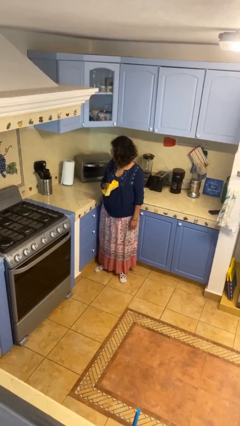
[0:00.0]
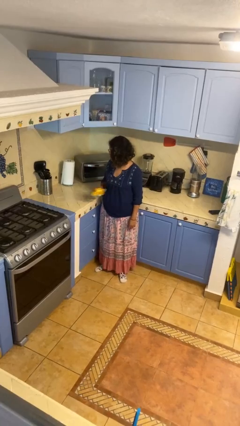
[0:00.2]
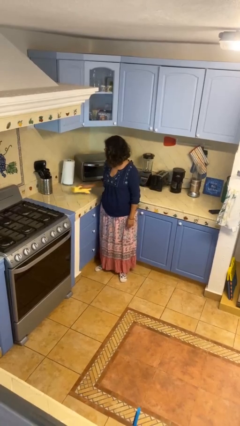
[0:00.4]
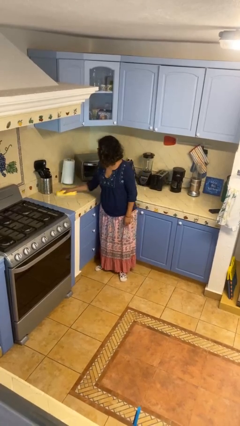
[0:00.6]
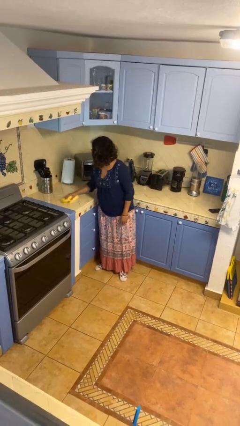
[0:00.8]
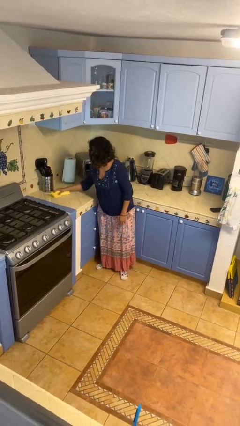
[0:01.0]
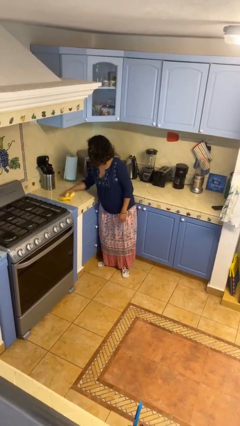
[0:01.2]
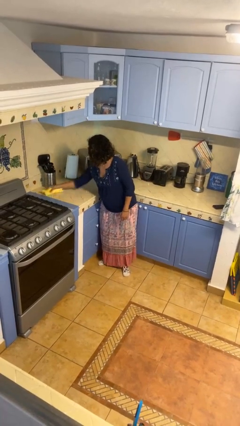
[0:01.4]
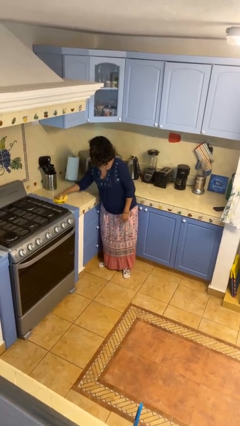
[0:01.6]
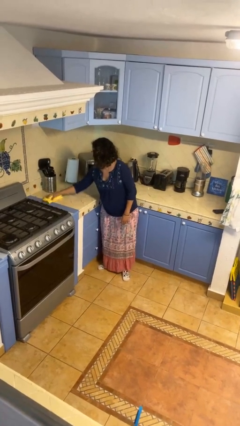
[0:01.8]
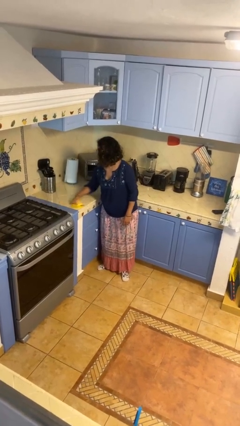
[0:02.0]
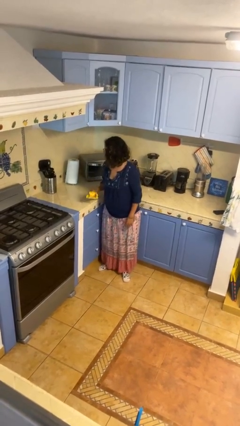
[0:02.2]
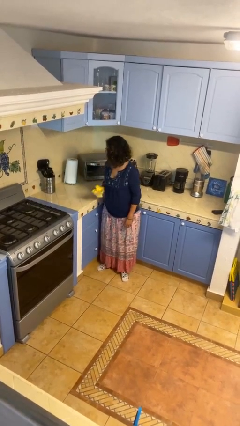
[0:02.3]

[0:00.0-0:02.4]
person cleans table with rag

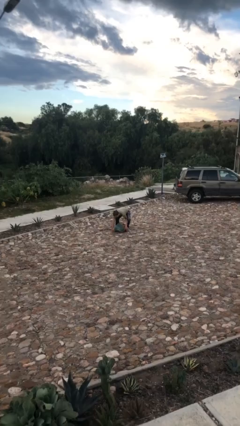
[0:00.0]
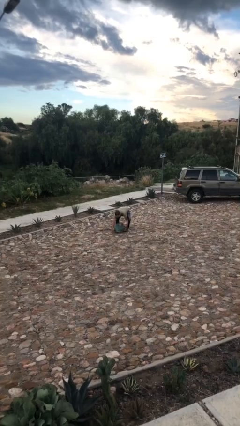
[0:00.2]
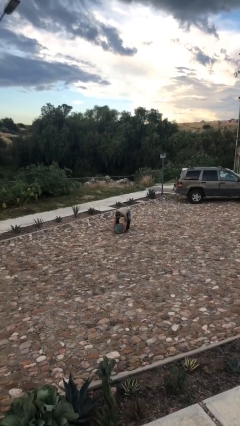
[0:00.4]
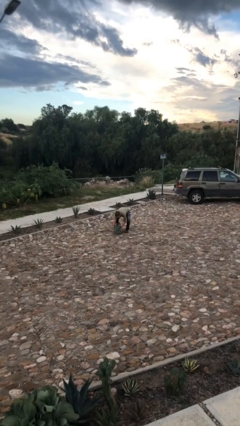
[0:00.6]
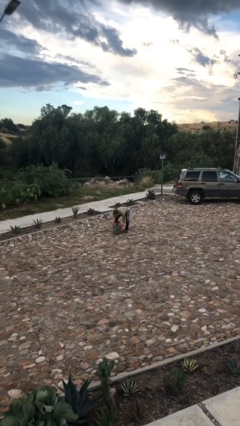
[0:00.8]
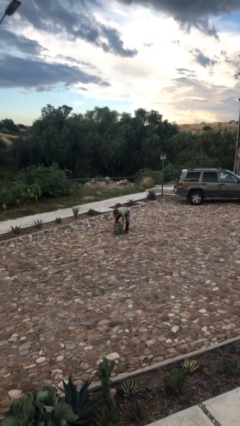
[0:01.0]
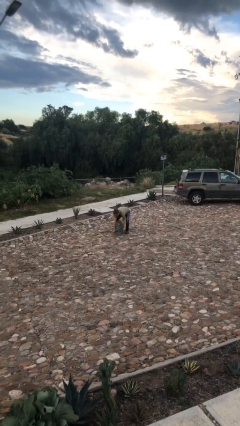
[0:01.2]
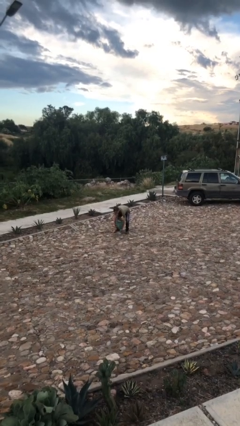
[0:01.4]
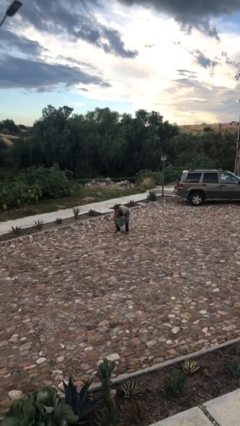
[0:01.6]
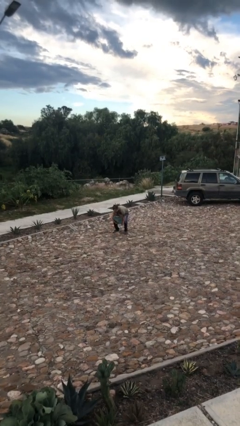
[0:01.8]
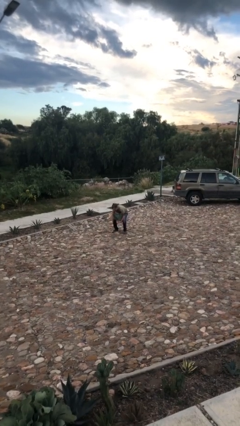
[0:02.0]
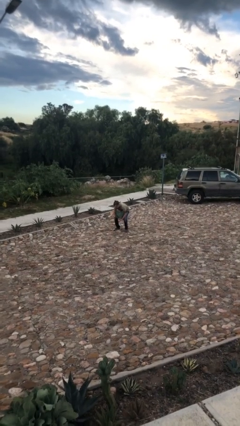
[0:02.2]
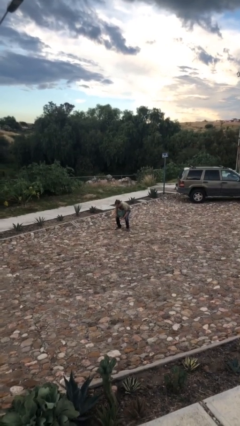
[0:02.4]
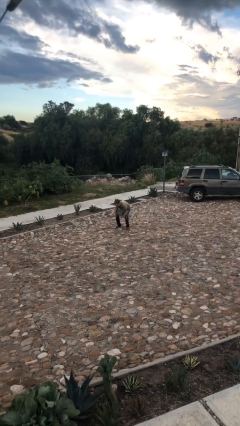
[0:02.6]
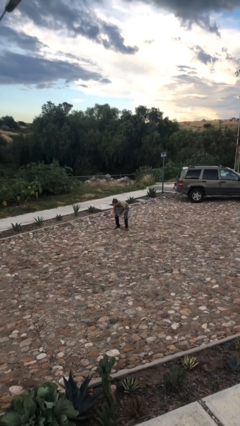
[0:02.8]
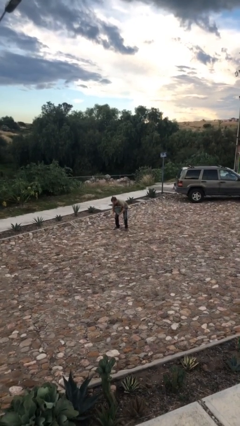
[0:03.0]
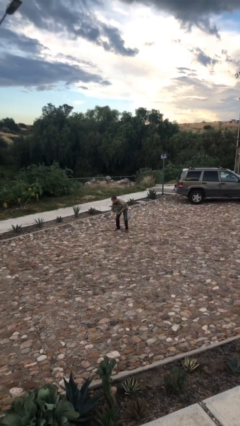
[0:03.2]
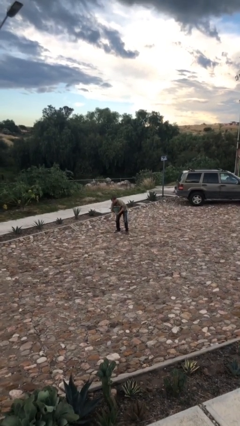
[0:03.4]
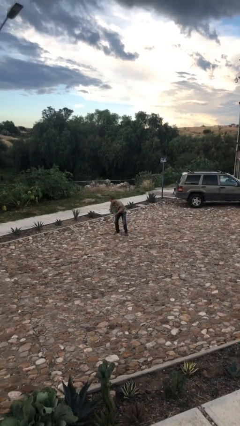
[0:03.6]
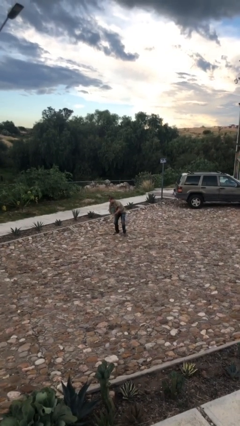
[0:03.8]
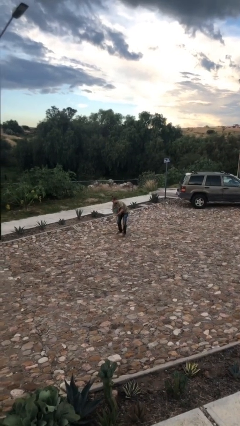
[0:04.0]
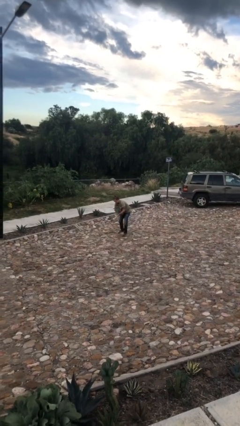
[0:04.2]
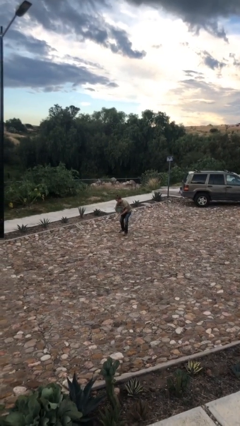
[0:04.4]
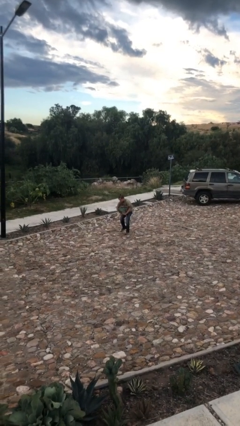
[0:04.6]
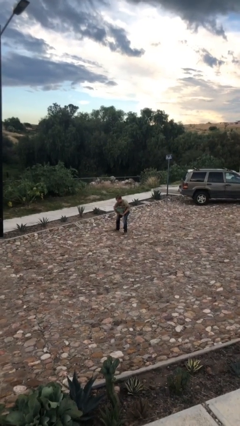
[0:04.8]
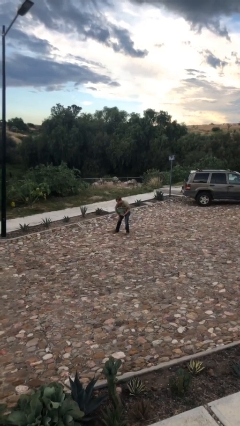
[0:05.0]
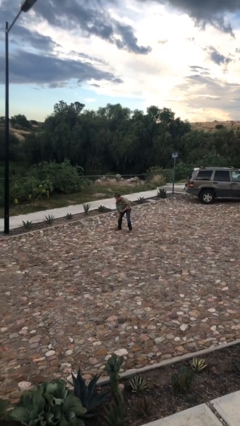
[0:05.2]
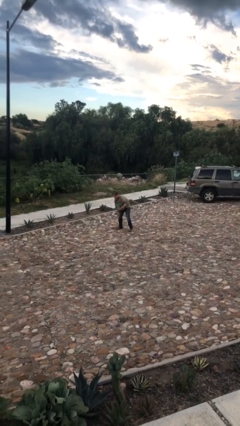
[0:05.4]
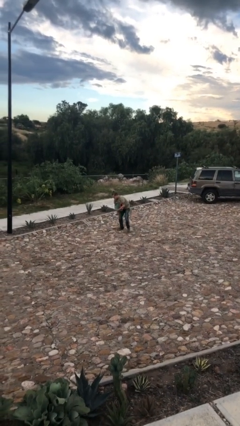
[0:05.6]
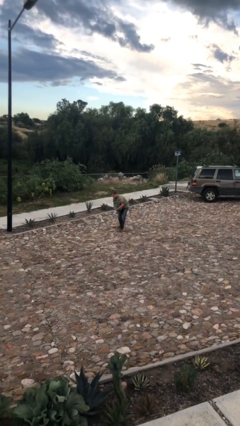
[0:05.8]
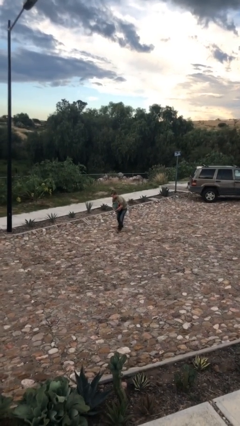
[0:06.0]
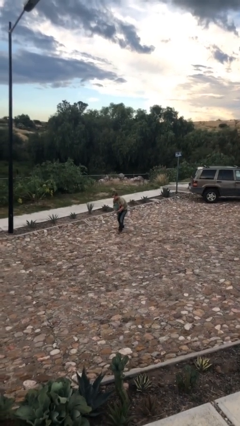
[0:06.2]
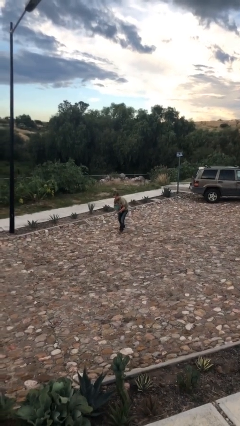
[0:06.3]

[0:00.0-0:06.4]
person carries heavy object

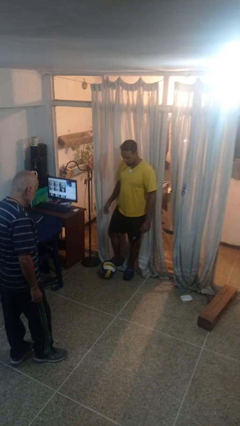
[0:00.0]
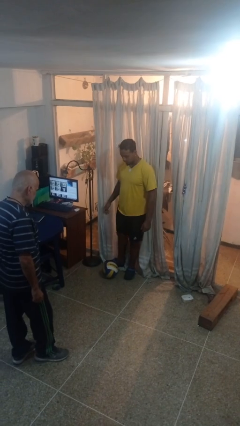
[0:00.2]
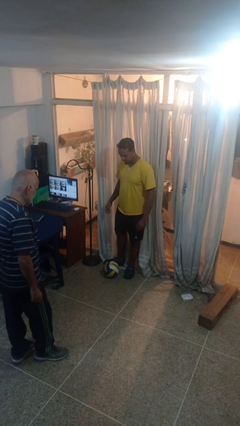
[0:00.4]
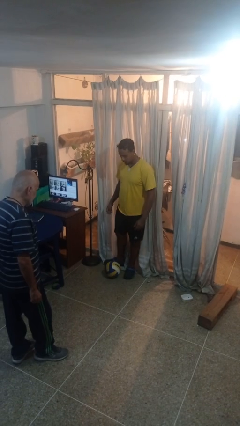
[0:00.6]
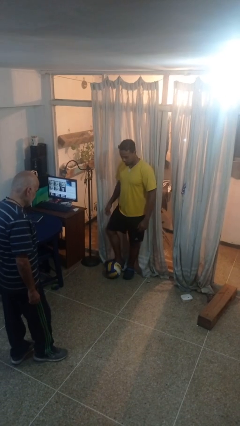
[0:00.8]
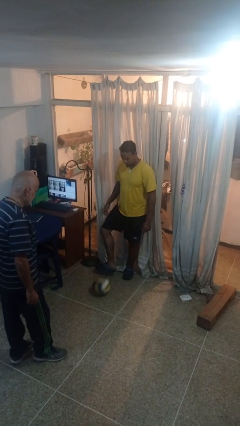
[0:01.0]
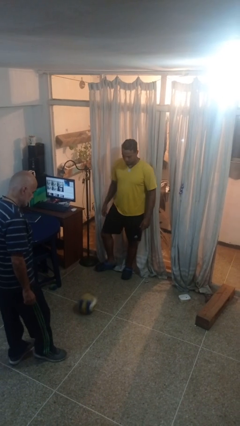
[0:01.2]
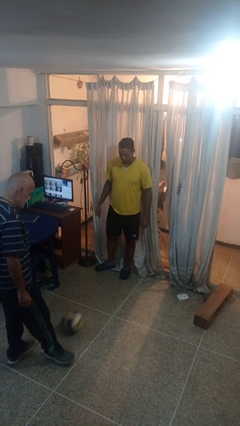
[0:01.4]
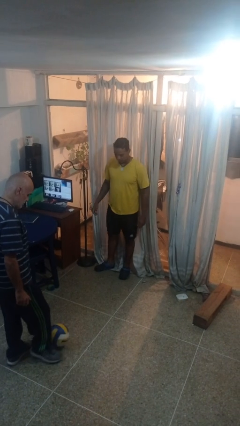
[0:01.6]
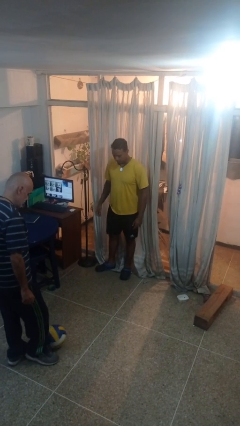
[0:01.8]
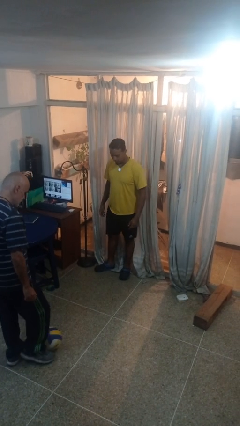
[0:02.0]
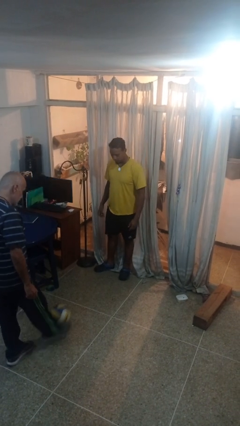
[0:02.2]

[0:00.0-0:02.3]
person kicks object to person

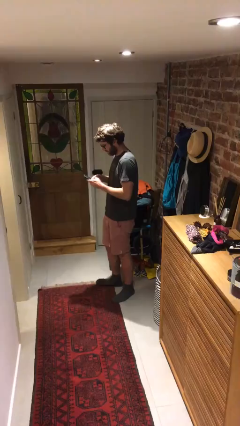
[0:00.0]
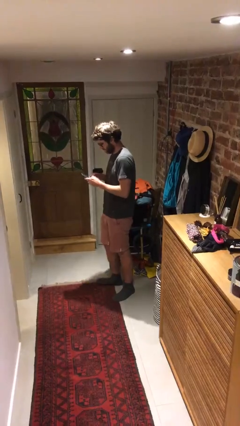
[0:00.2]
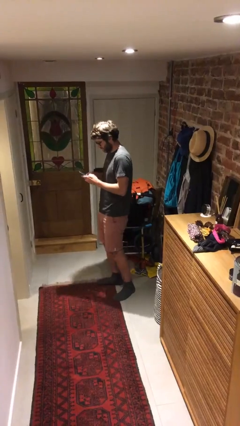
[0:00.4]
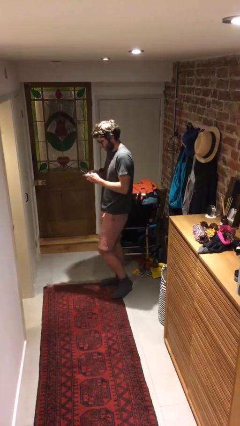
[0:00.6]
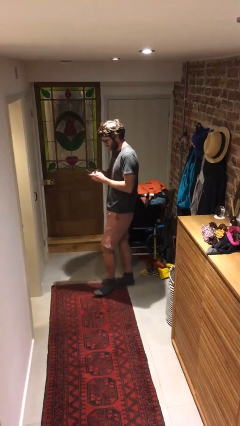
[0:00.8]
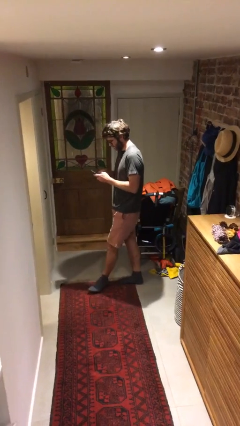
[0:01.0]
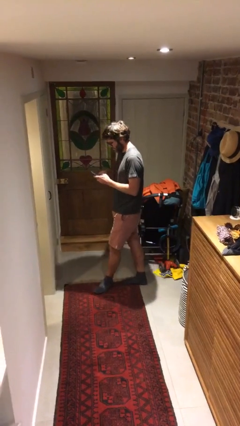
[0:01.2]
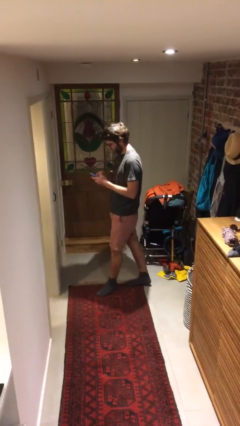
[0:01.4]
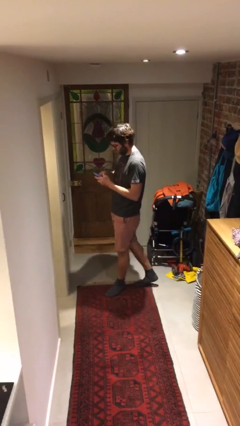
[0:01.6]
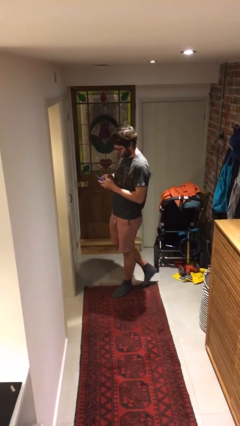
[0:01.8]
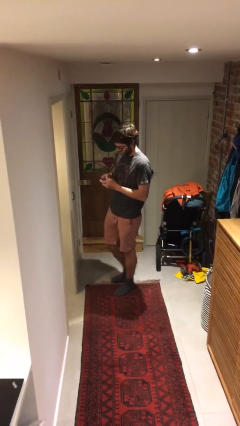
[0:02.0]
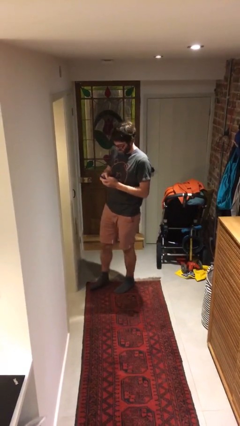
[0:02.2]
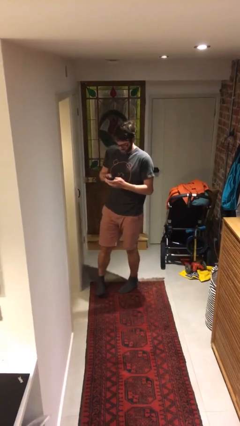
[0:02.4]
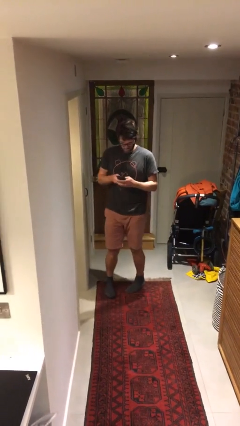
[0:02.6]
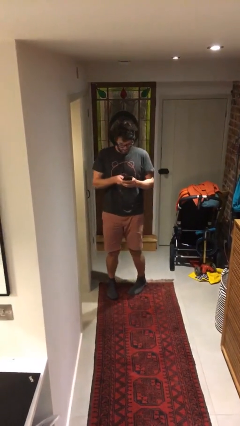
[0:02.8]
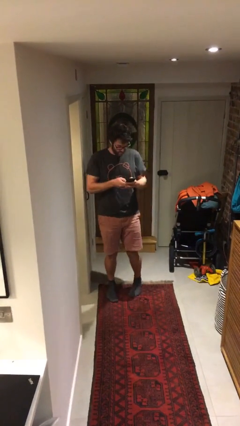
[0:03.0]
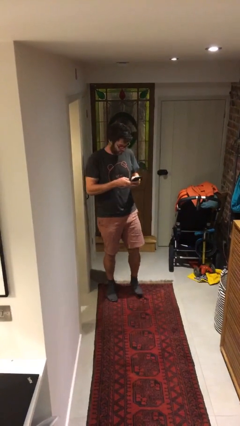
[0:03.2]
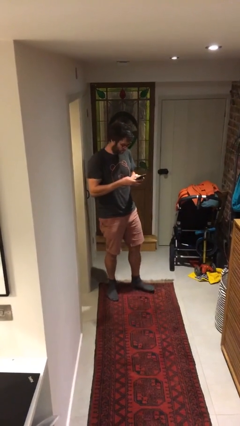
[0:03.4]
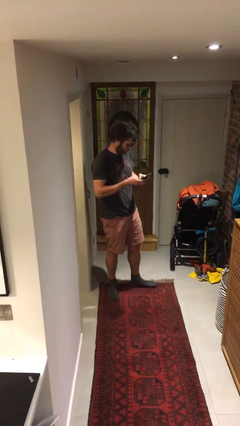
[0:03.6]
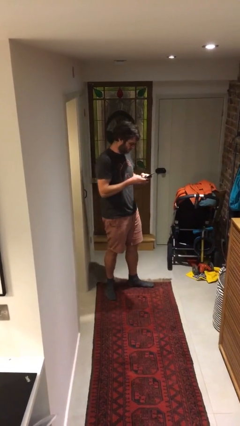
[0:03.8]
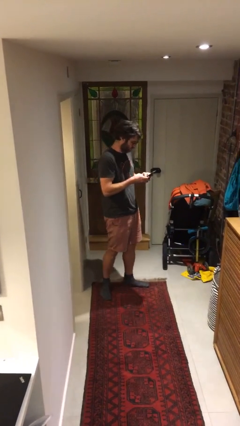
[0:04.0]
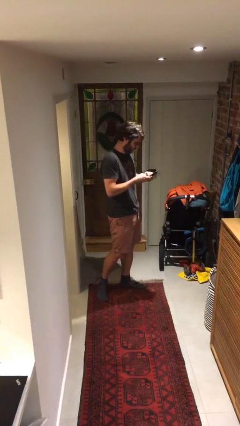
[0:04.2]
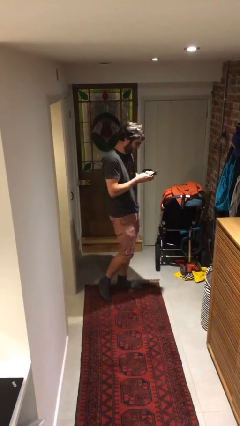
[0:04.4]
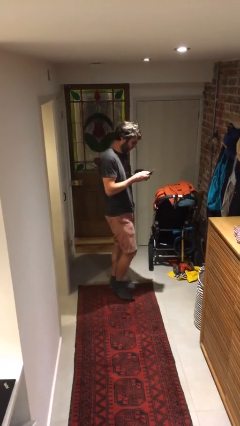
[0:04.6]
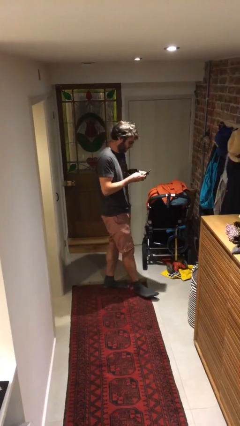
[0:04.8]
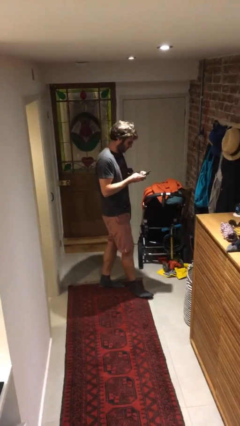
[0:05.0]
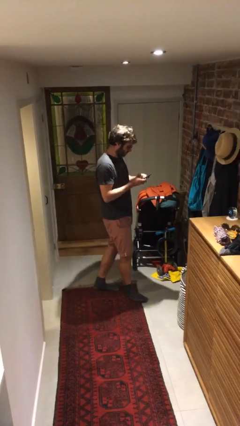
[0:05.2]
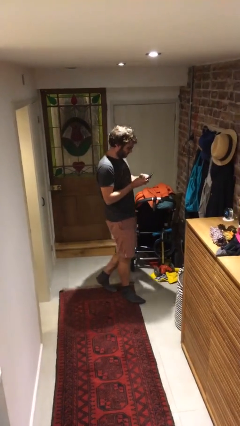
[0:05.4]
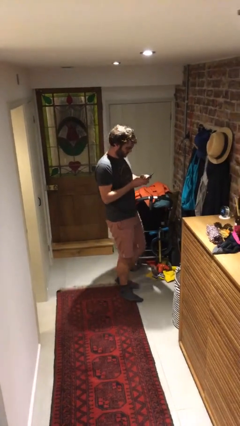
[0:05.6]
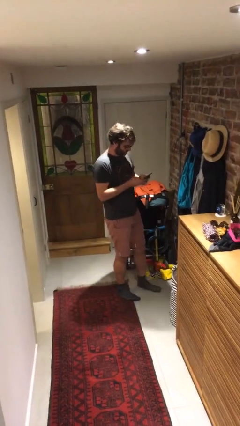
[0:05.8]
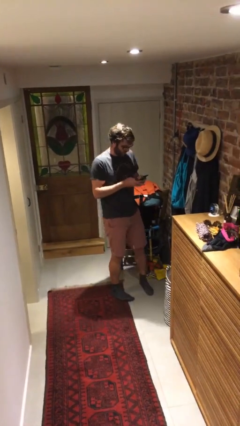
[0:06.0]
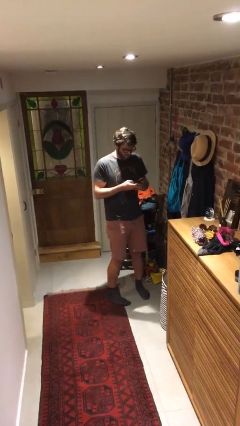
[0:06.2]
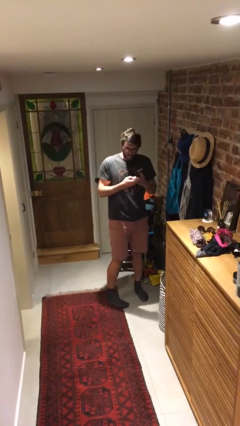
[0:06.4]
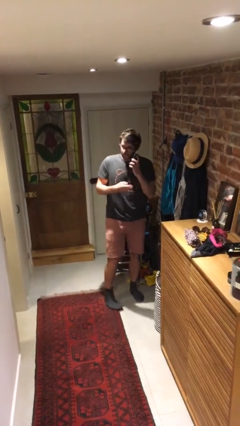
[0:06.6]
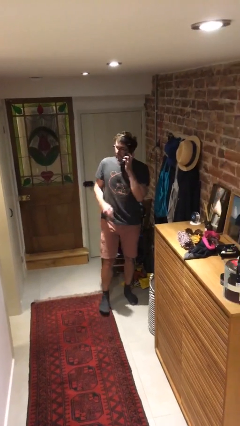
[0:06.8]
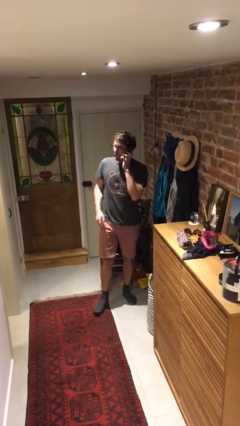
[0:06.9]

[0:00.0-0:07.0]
person texts on phone
